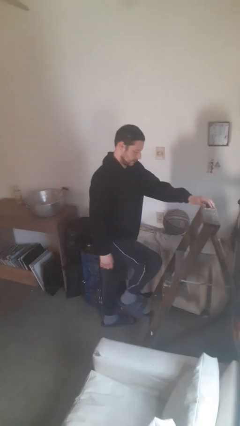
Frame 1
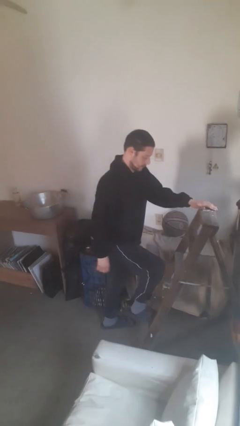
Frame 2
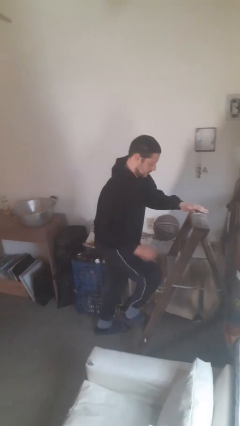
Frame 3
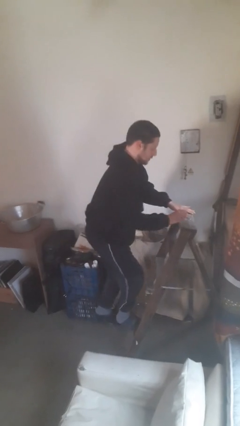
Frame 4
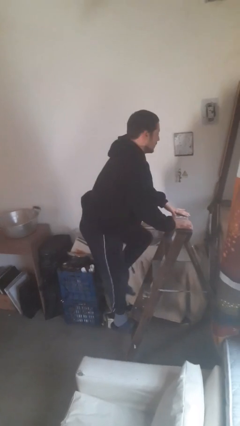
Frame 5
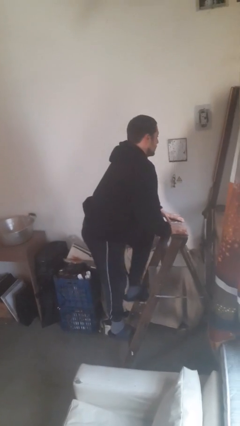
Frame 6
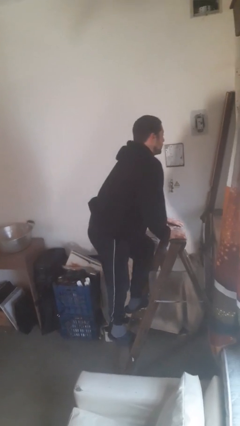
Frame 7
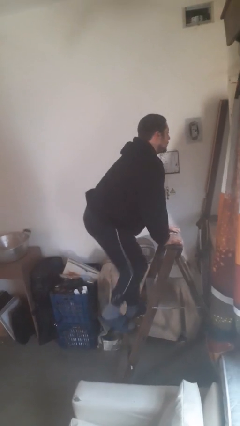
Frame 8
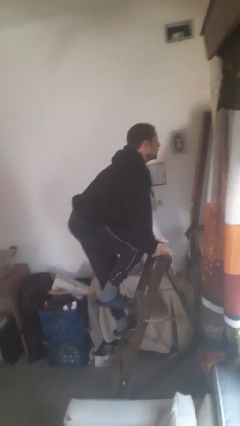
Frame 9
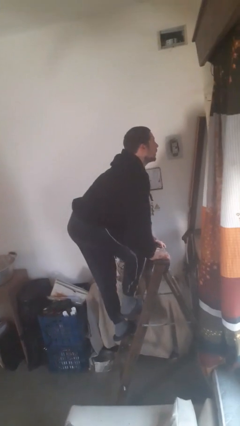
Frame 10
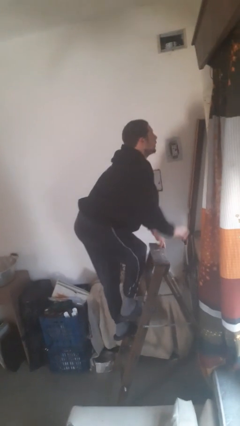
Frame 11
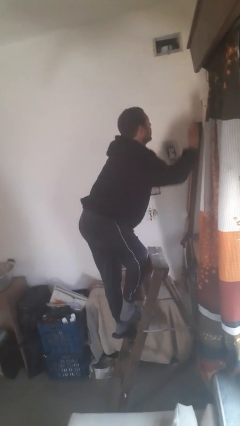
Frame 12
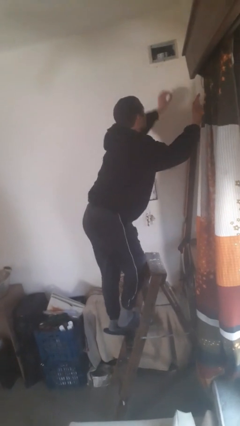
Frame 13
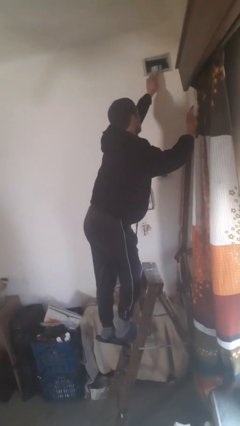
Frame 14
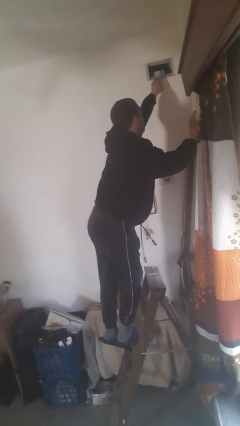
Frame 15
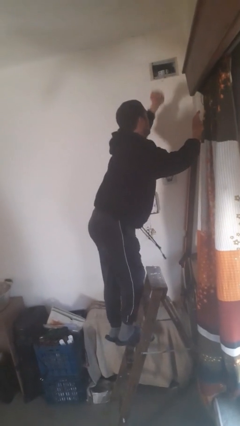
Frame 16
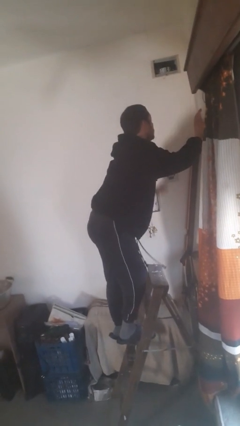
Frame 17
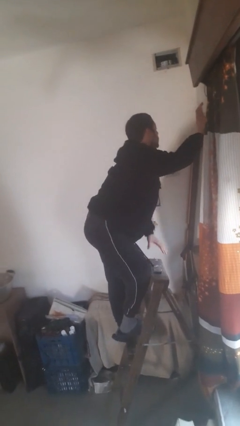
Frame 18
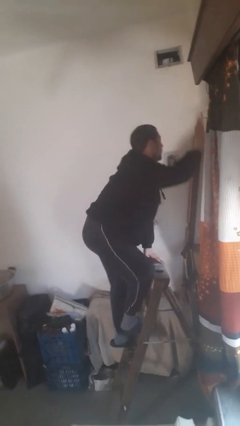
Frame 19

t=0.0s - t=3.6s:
person climbs up ladder

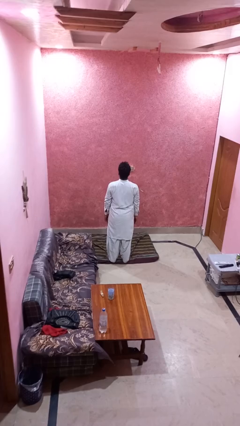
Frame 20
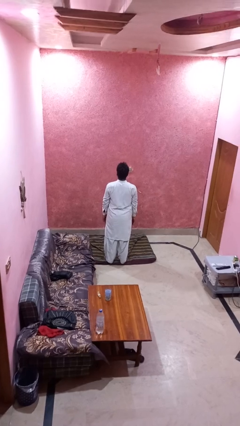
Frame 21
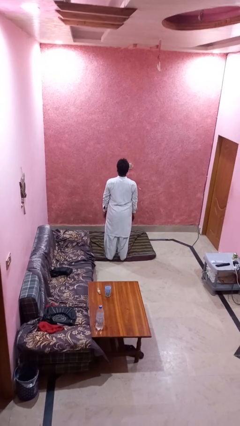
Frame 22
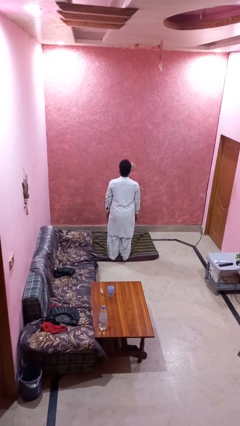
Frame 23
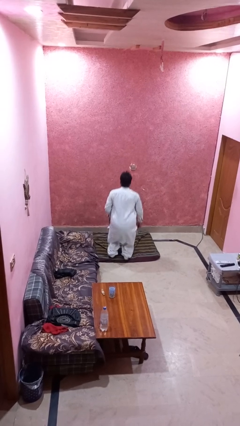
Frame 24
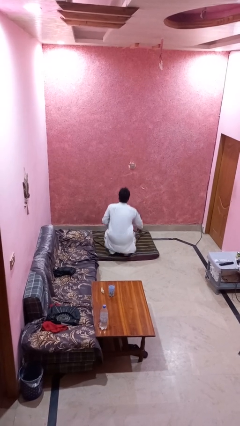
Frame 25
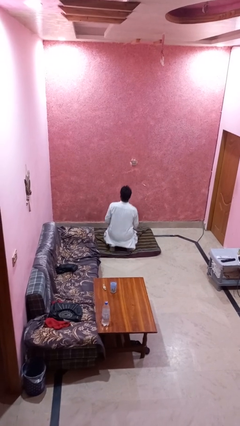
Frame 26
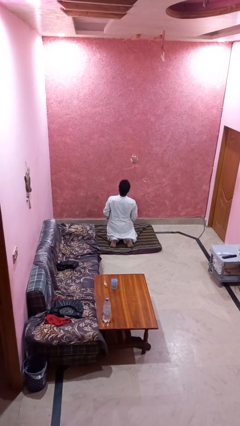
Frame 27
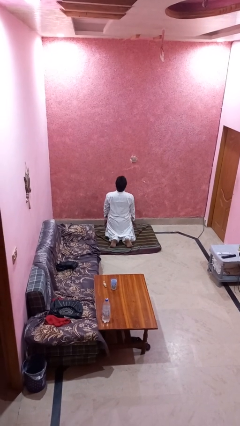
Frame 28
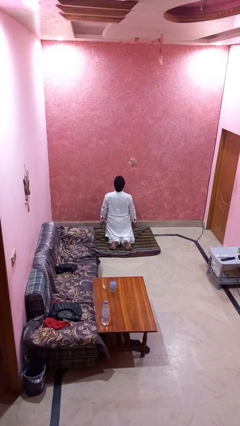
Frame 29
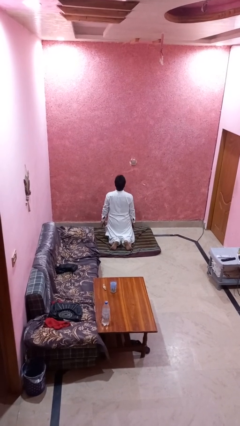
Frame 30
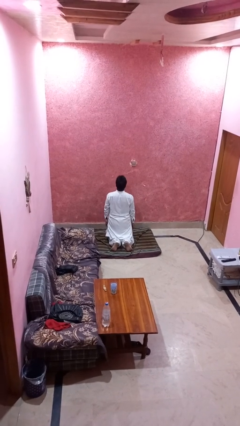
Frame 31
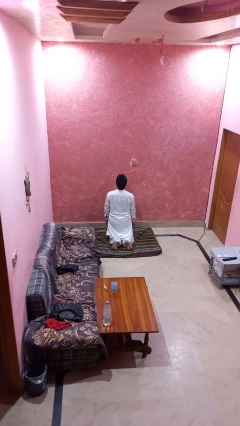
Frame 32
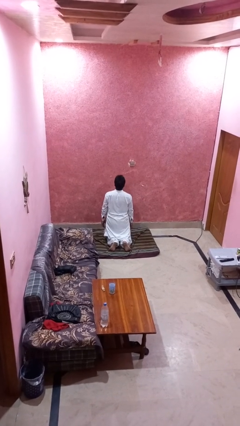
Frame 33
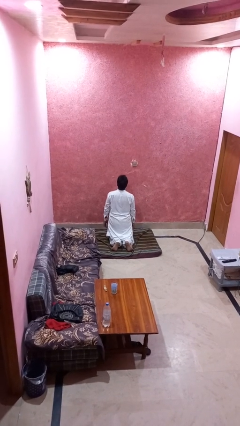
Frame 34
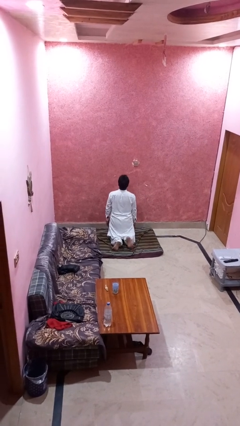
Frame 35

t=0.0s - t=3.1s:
person kneels

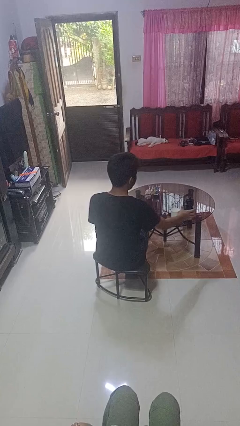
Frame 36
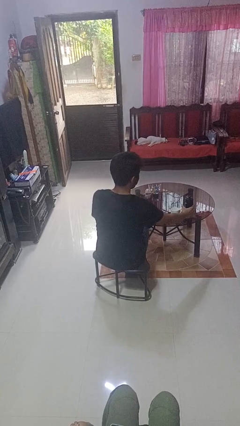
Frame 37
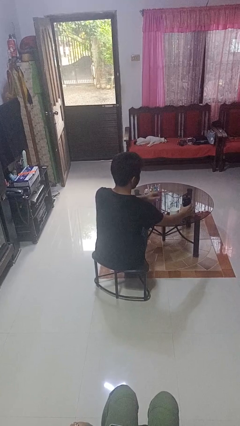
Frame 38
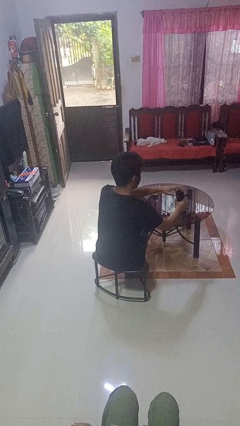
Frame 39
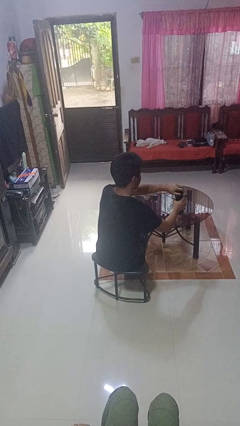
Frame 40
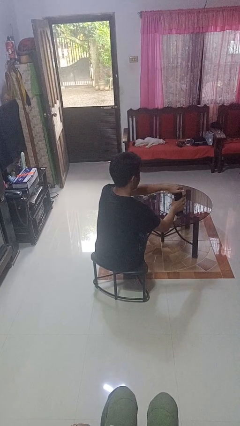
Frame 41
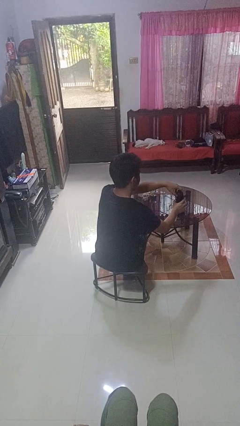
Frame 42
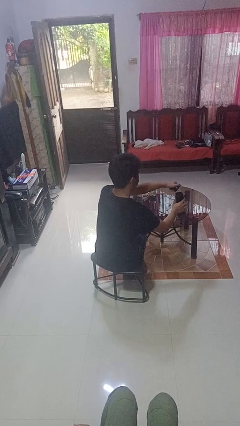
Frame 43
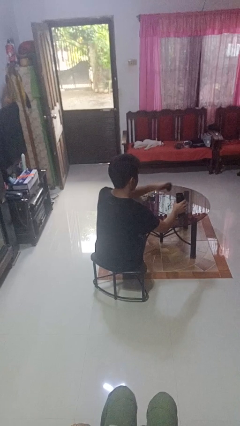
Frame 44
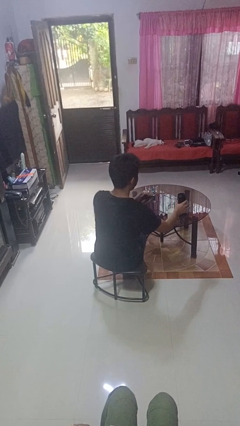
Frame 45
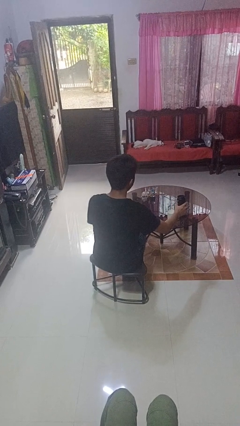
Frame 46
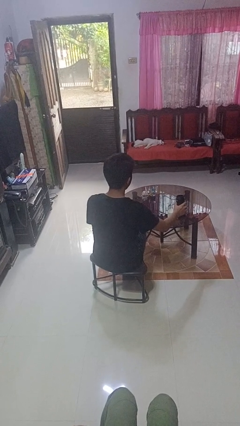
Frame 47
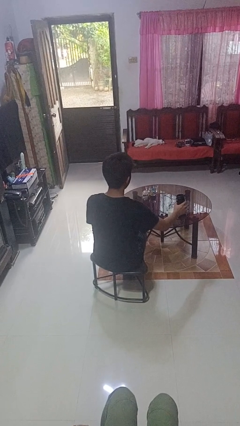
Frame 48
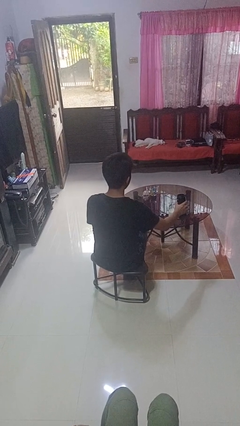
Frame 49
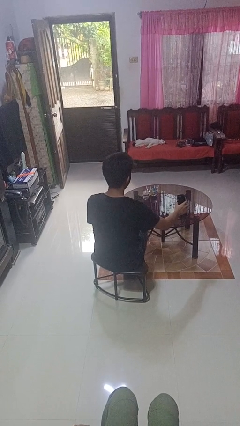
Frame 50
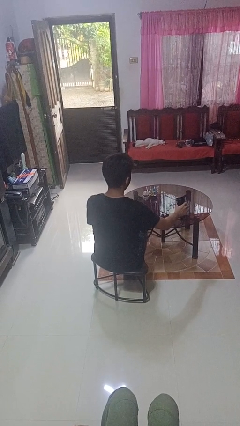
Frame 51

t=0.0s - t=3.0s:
person unscrews lid from bottle

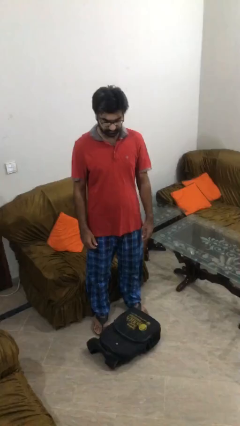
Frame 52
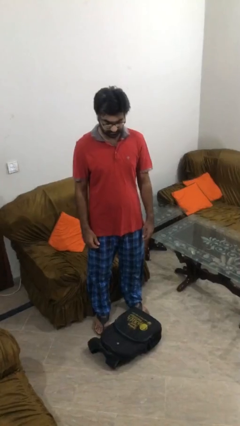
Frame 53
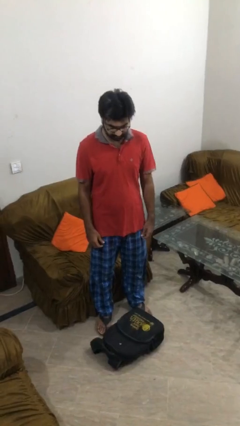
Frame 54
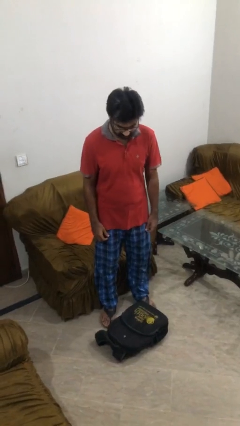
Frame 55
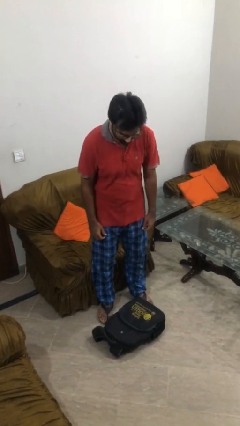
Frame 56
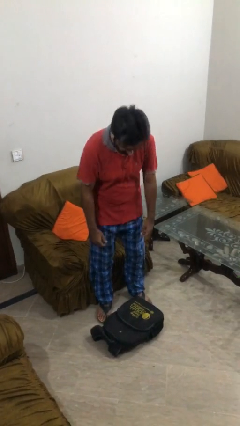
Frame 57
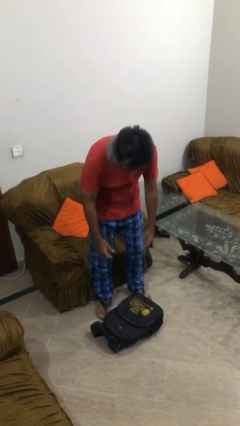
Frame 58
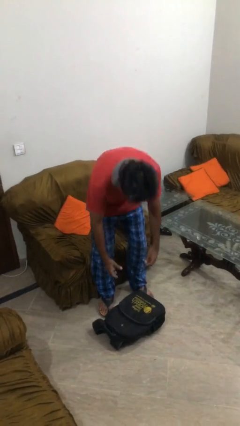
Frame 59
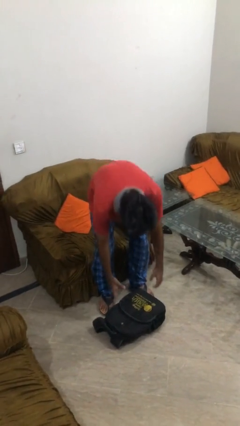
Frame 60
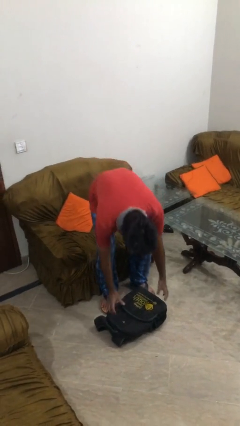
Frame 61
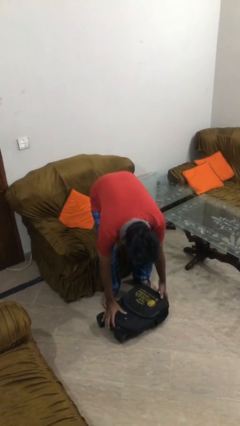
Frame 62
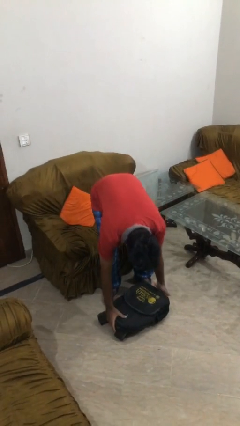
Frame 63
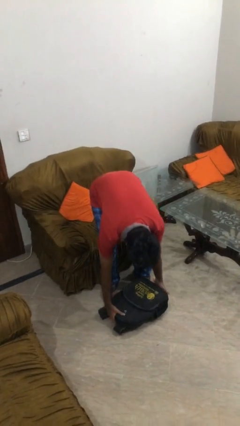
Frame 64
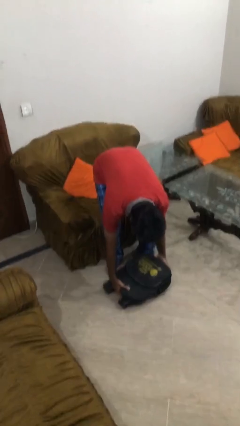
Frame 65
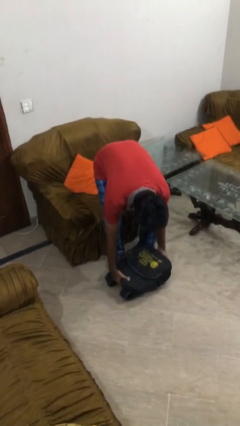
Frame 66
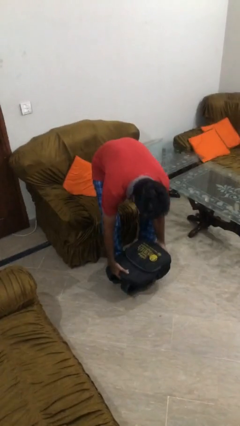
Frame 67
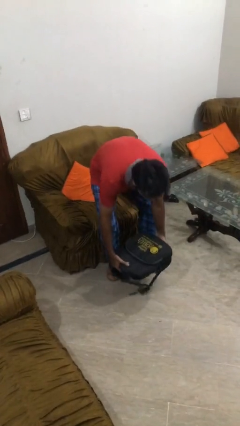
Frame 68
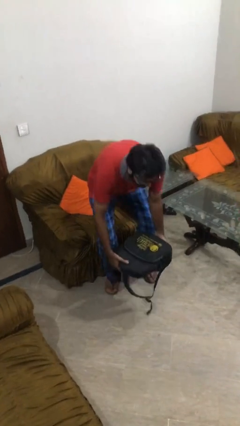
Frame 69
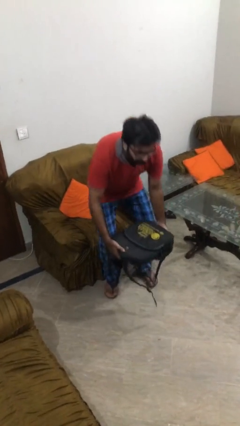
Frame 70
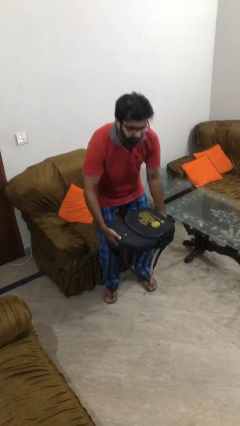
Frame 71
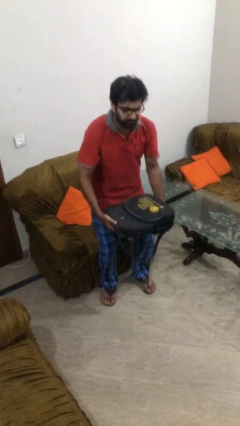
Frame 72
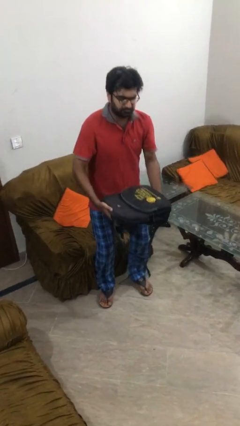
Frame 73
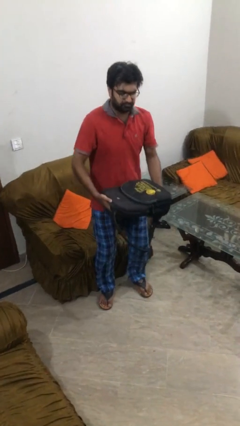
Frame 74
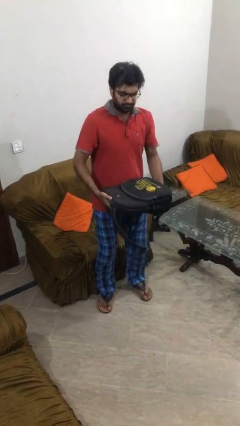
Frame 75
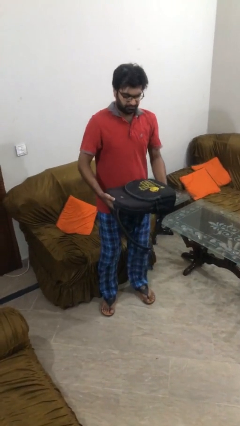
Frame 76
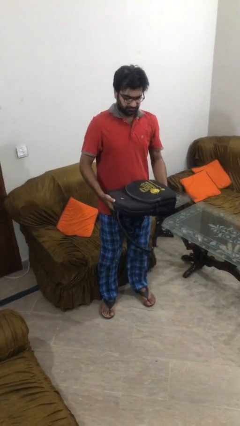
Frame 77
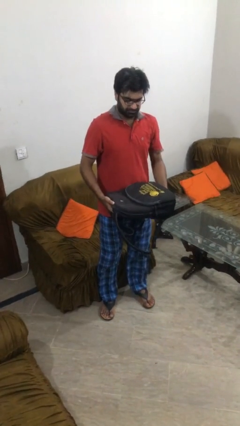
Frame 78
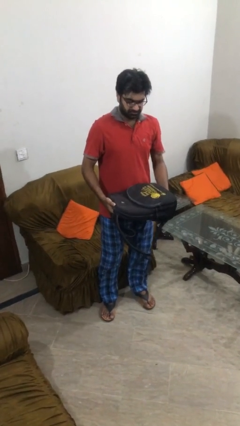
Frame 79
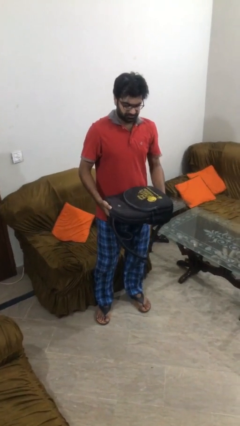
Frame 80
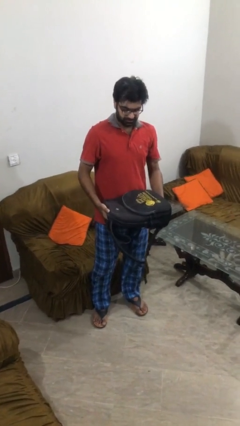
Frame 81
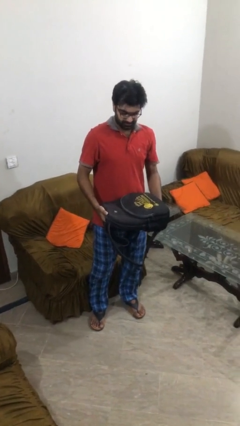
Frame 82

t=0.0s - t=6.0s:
person picks up object from floor

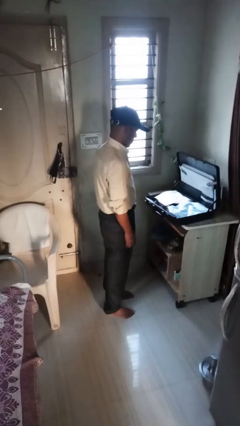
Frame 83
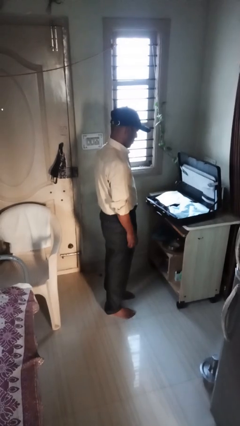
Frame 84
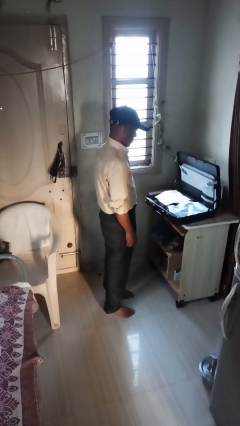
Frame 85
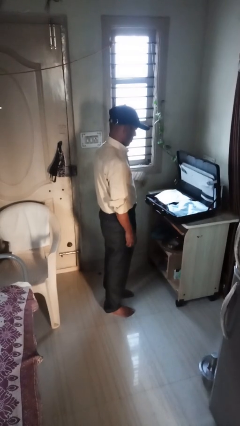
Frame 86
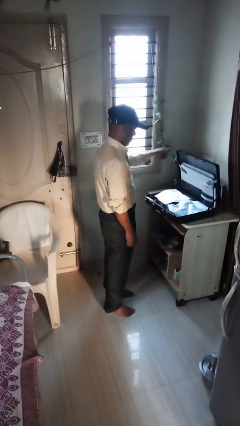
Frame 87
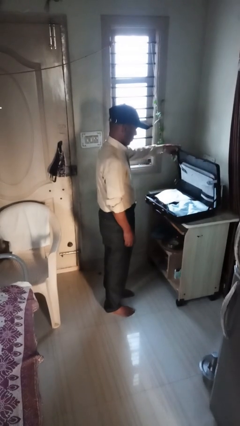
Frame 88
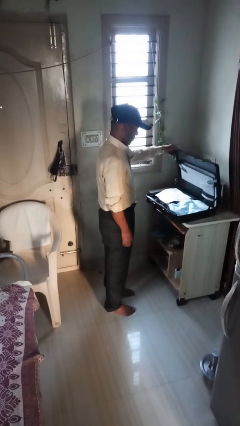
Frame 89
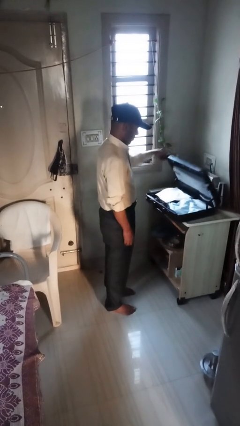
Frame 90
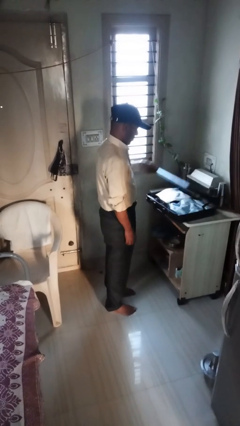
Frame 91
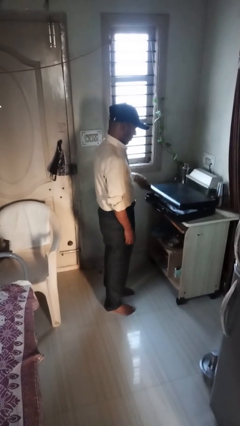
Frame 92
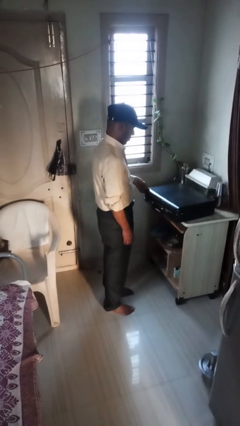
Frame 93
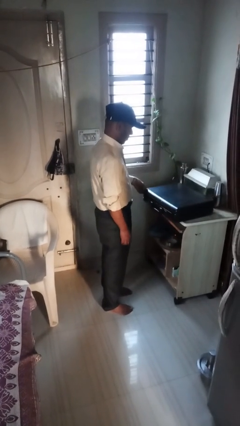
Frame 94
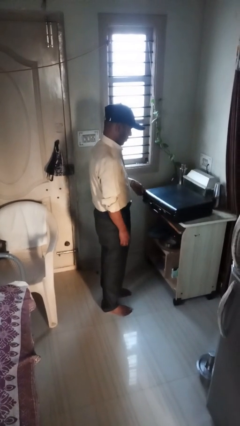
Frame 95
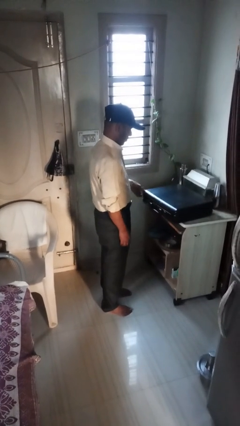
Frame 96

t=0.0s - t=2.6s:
person closes suitcase
